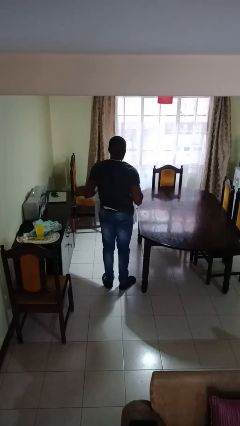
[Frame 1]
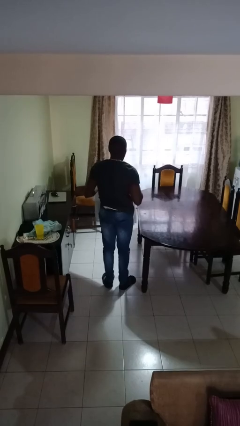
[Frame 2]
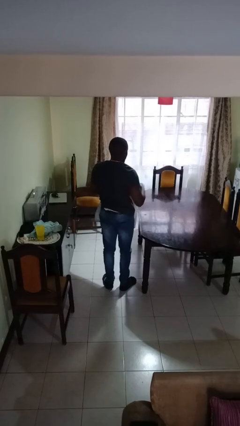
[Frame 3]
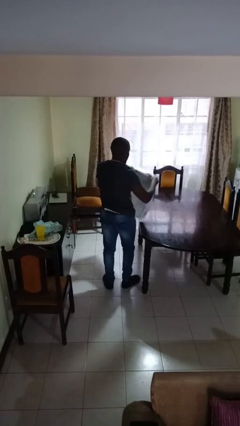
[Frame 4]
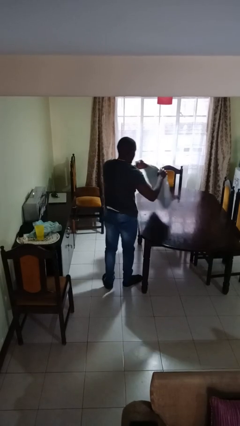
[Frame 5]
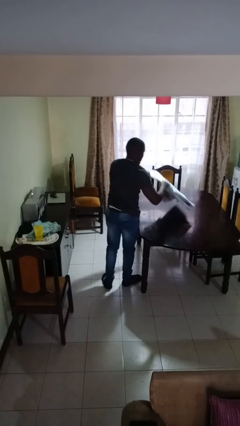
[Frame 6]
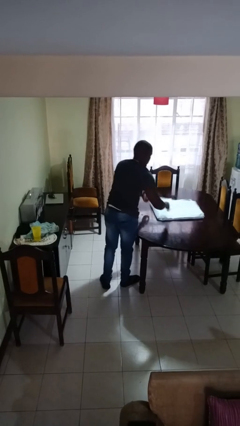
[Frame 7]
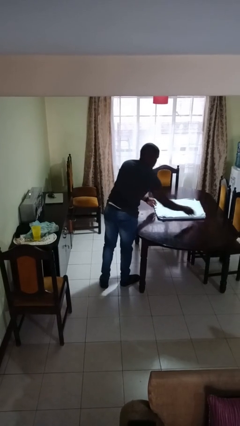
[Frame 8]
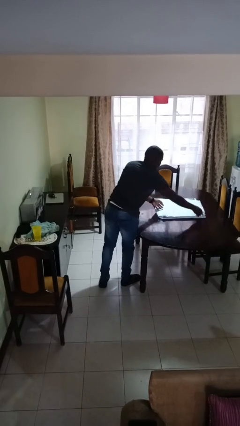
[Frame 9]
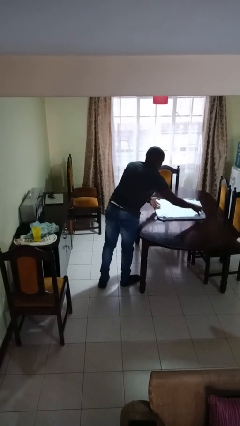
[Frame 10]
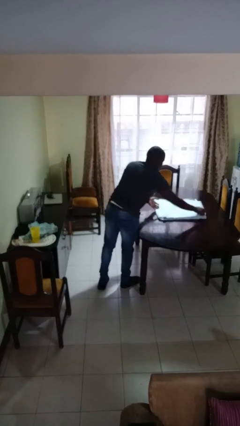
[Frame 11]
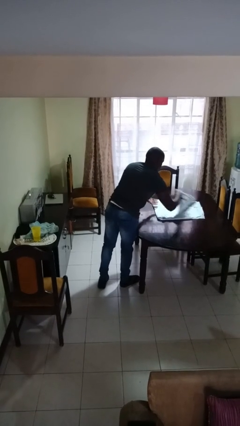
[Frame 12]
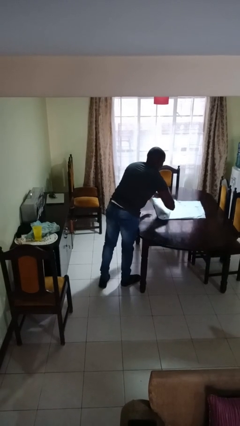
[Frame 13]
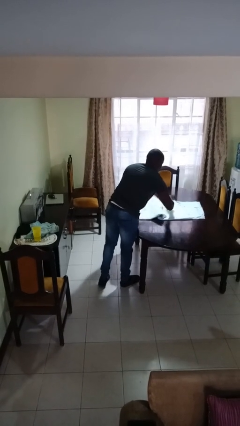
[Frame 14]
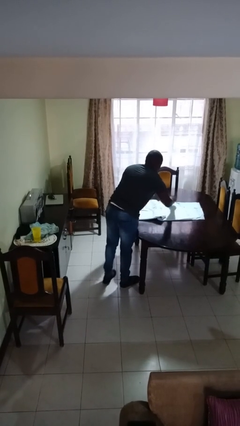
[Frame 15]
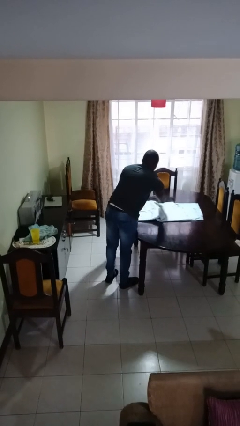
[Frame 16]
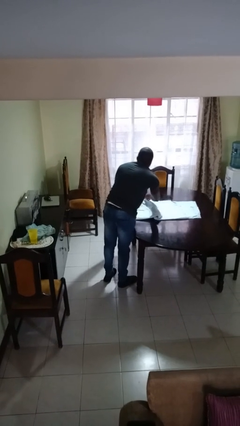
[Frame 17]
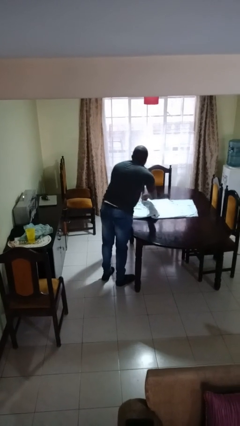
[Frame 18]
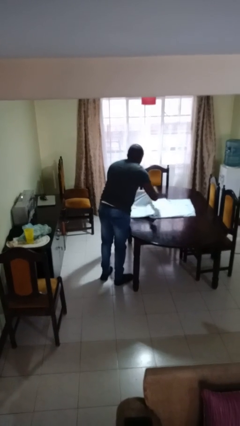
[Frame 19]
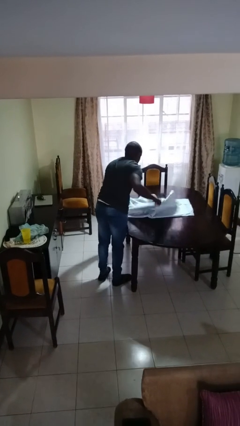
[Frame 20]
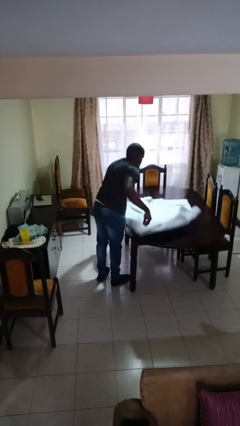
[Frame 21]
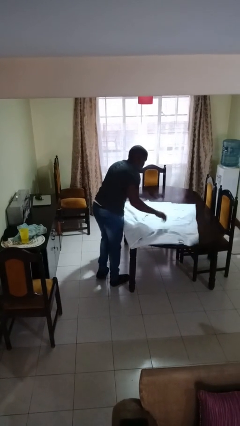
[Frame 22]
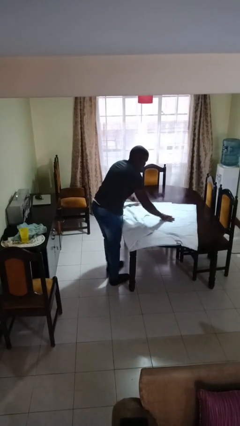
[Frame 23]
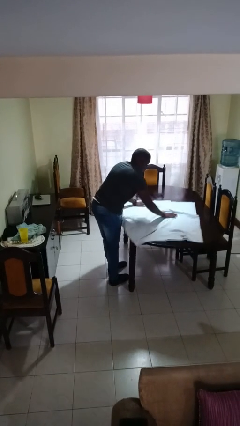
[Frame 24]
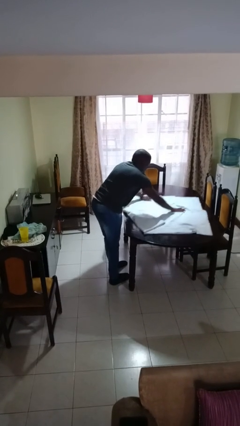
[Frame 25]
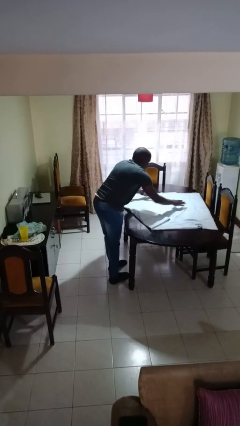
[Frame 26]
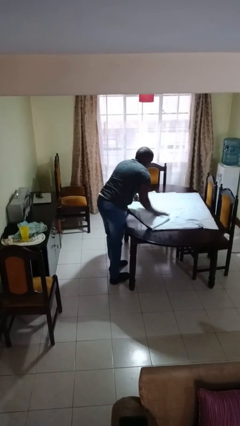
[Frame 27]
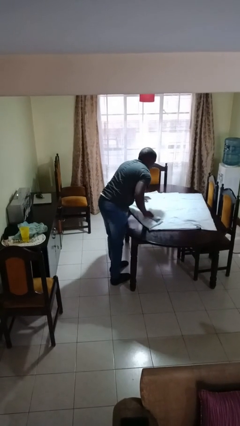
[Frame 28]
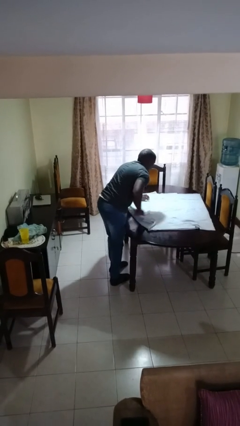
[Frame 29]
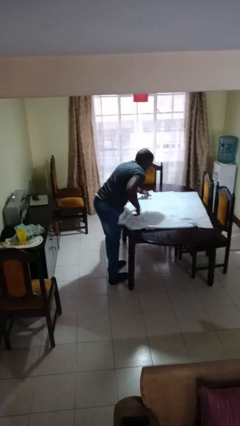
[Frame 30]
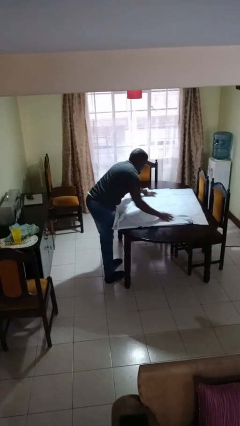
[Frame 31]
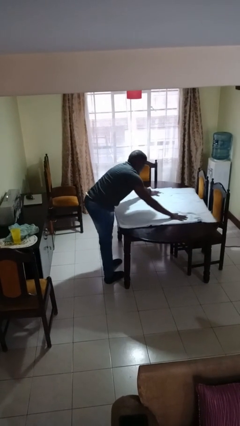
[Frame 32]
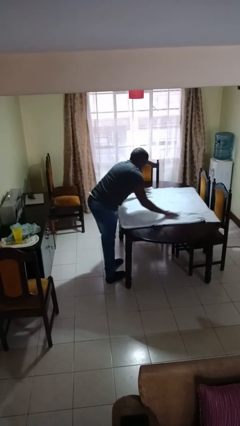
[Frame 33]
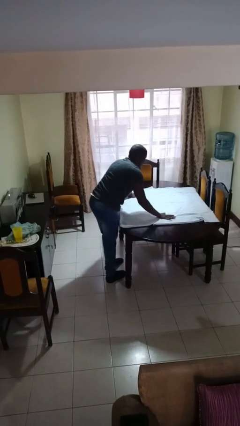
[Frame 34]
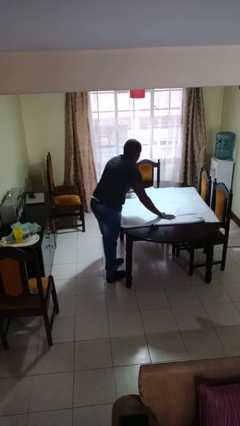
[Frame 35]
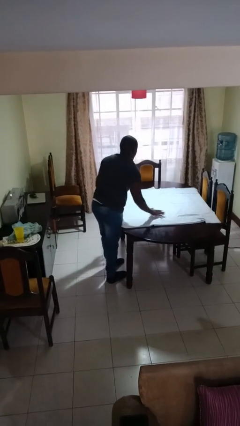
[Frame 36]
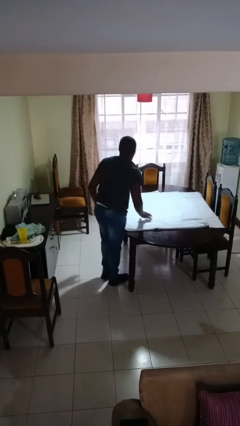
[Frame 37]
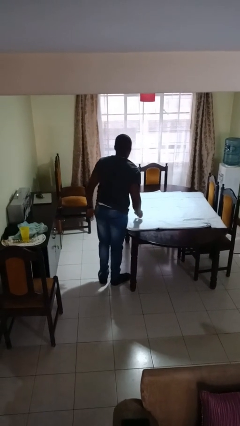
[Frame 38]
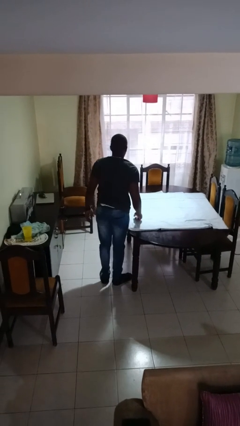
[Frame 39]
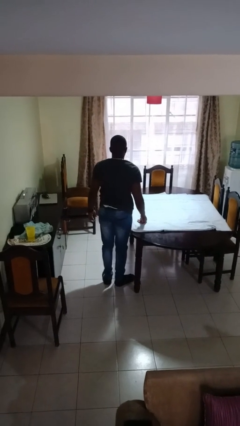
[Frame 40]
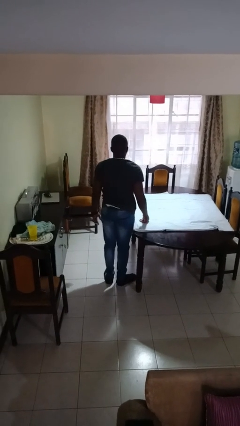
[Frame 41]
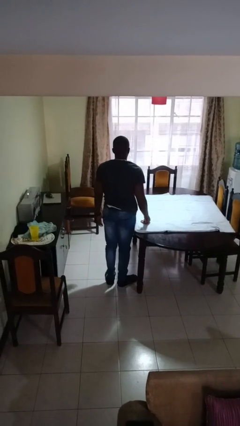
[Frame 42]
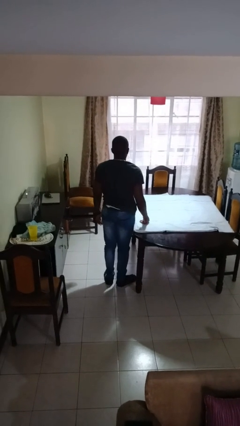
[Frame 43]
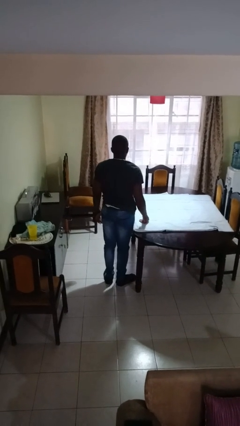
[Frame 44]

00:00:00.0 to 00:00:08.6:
person spreads tablecloth

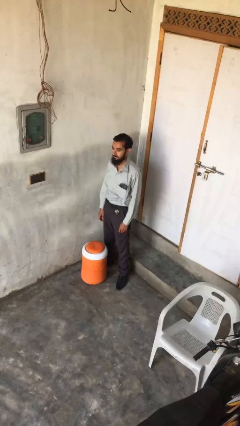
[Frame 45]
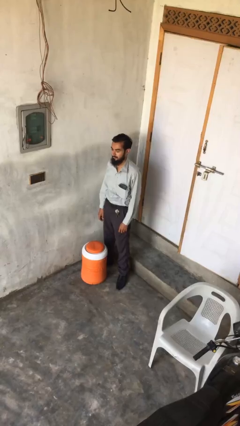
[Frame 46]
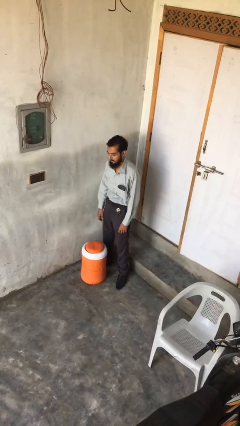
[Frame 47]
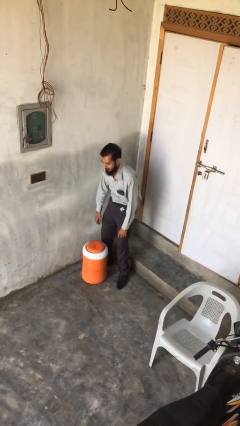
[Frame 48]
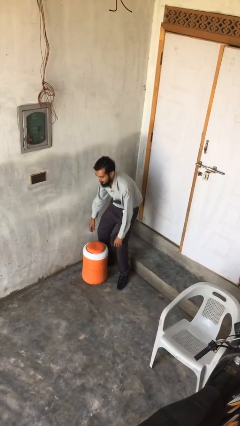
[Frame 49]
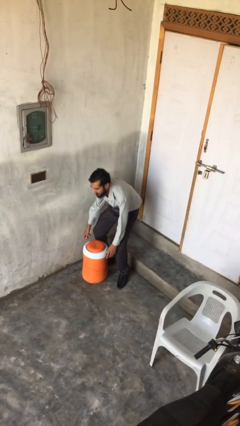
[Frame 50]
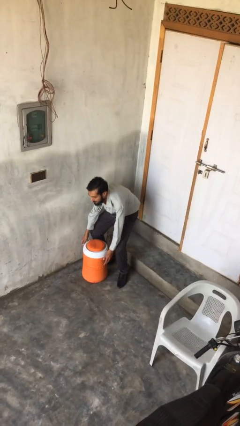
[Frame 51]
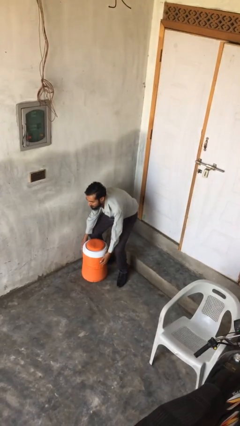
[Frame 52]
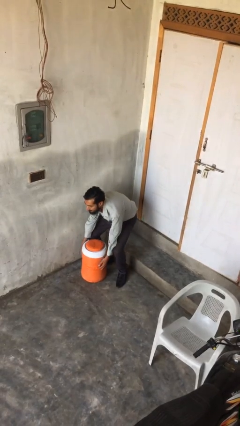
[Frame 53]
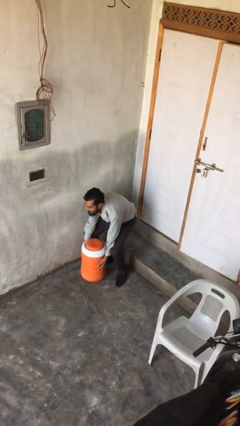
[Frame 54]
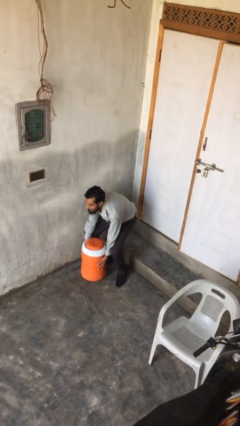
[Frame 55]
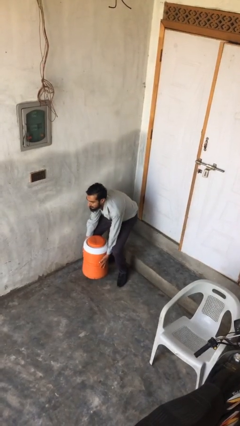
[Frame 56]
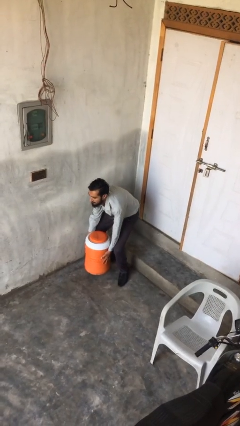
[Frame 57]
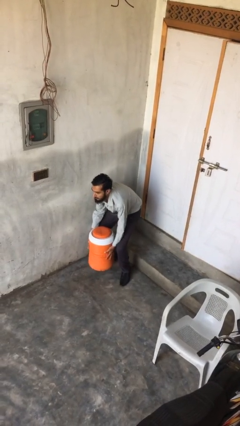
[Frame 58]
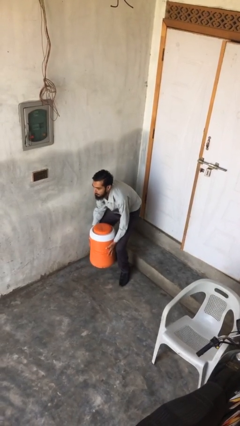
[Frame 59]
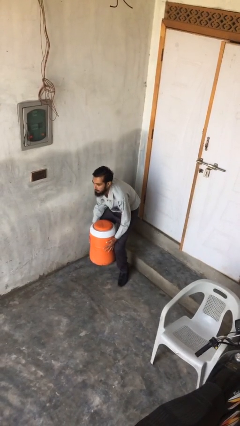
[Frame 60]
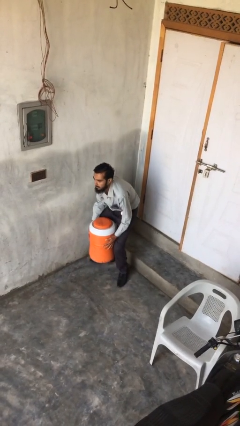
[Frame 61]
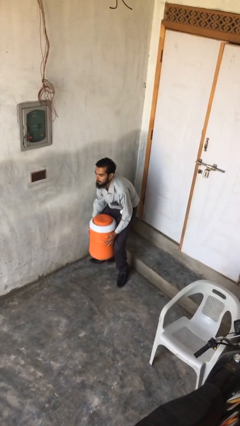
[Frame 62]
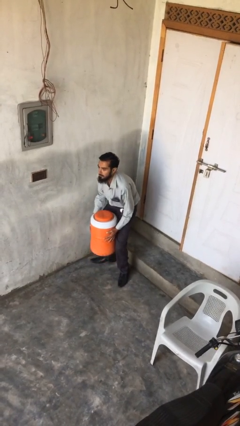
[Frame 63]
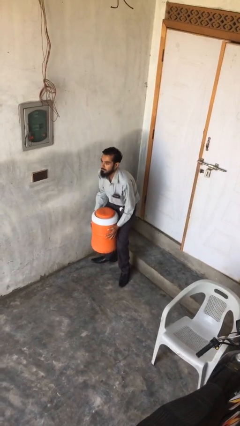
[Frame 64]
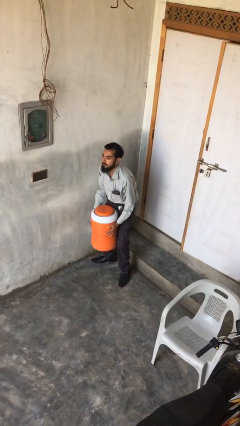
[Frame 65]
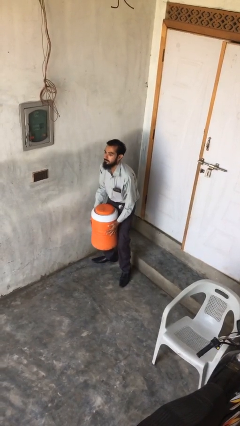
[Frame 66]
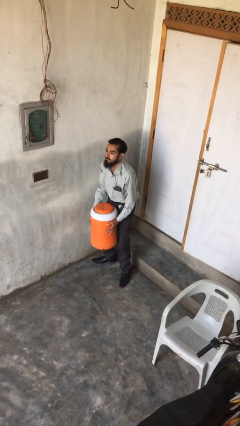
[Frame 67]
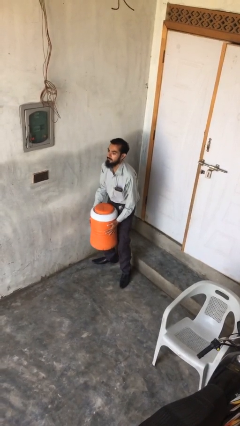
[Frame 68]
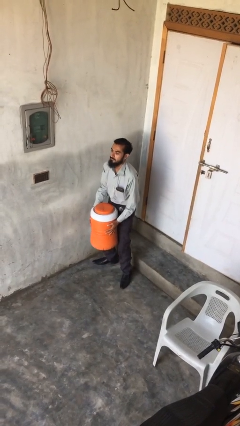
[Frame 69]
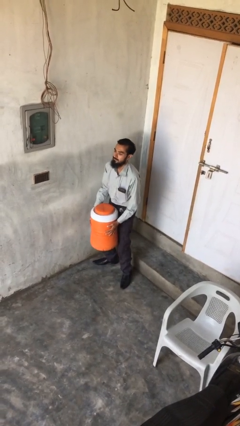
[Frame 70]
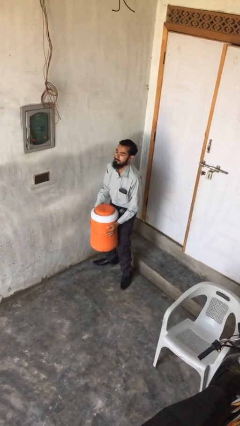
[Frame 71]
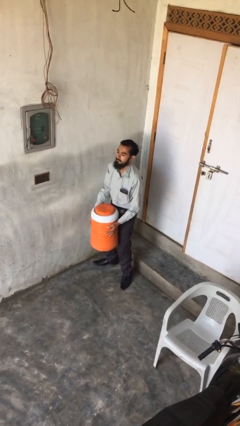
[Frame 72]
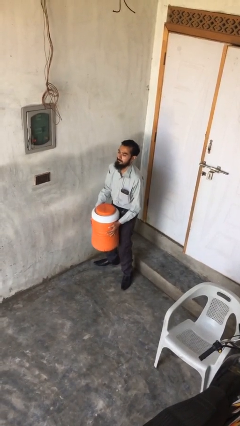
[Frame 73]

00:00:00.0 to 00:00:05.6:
person picks up object from floor

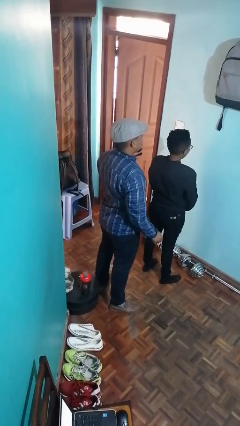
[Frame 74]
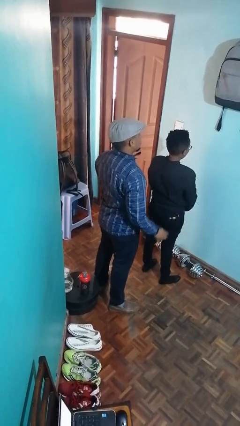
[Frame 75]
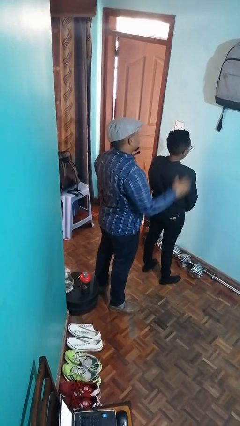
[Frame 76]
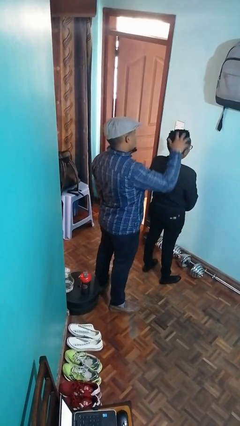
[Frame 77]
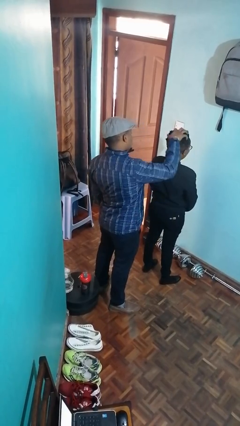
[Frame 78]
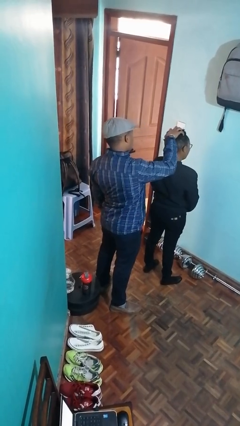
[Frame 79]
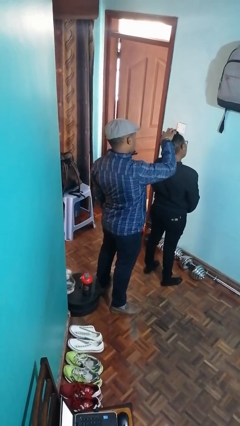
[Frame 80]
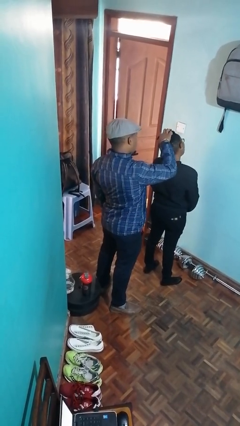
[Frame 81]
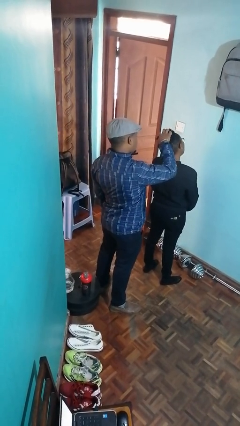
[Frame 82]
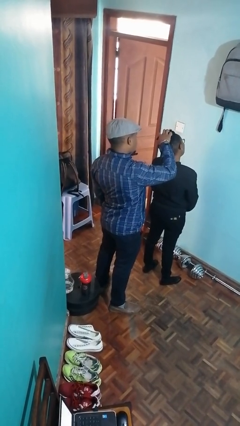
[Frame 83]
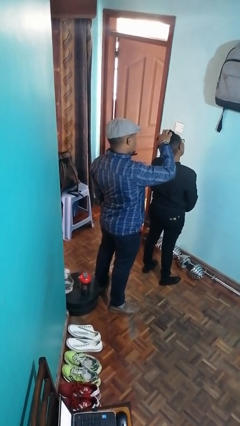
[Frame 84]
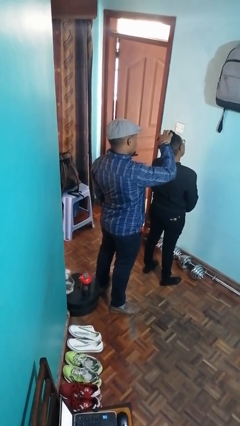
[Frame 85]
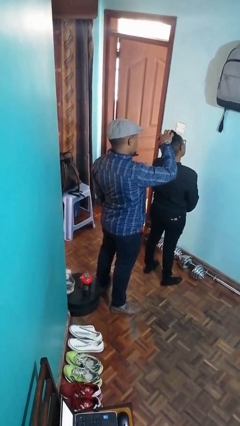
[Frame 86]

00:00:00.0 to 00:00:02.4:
person grabs person by hair

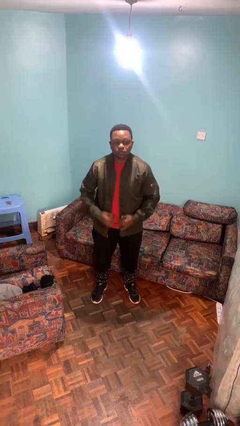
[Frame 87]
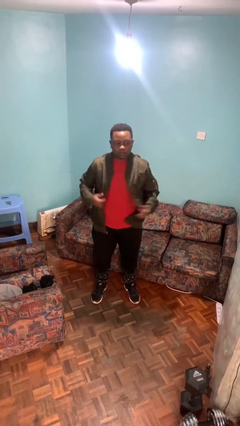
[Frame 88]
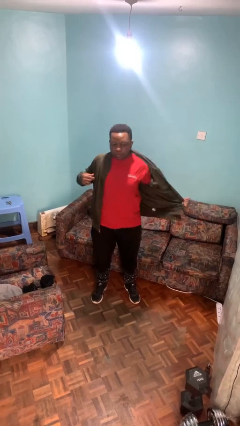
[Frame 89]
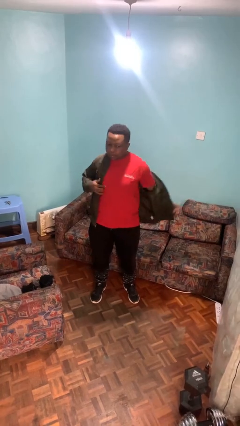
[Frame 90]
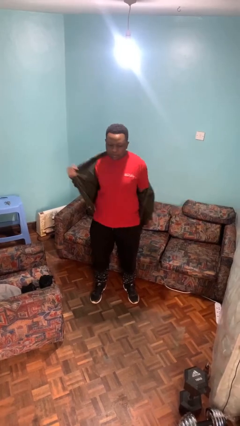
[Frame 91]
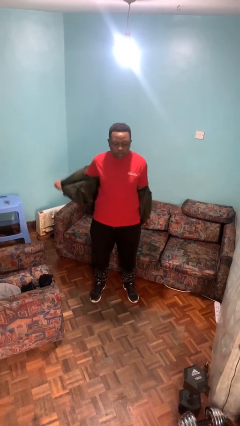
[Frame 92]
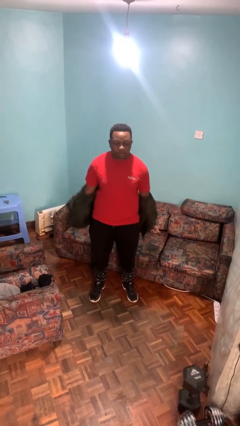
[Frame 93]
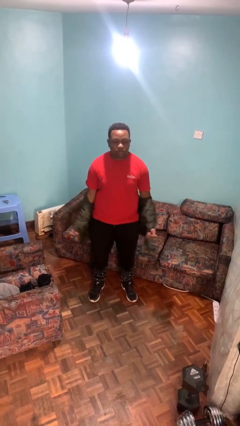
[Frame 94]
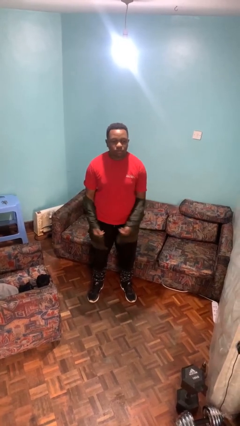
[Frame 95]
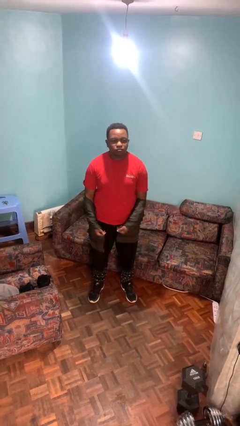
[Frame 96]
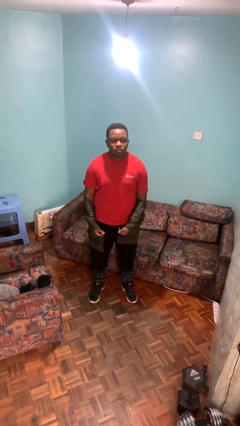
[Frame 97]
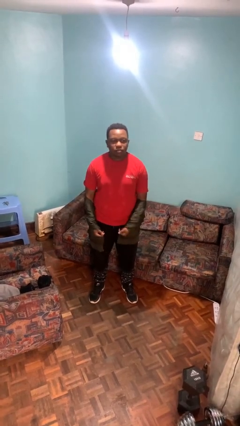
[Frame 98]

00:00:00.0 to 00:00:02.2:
person takes off jacket
